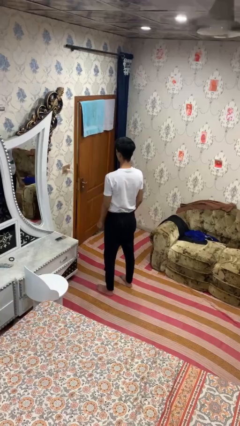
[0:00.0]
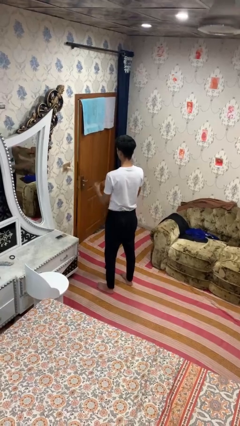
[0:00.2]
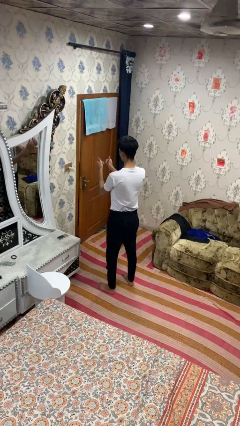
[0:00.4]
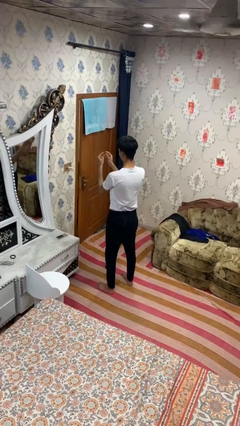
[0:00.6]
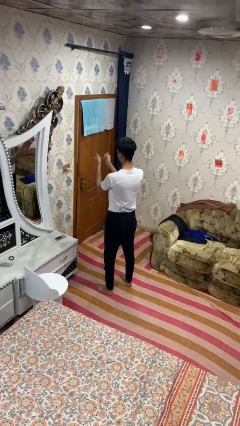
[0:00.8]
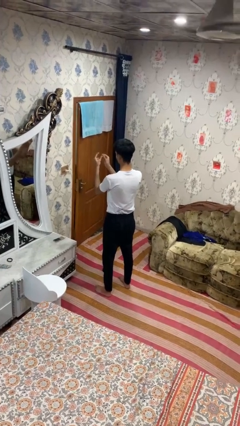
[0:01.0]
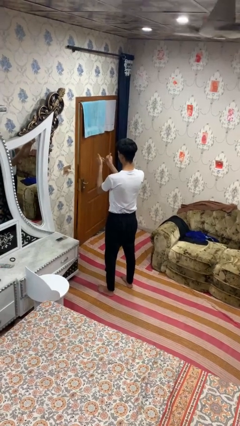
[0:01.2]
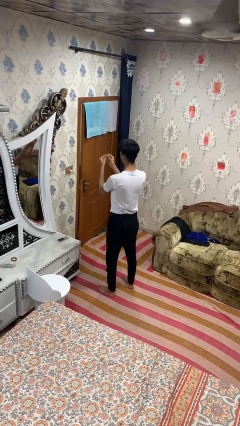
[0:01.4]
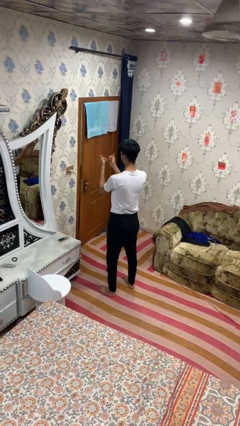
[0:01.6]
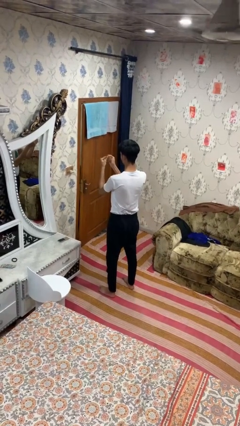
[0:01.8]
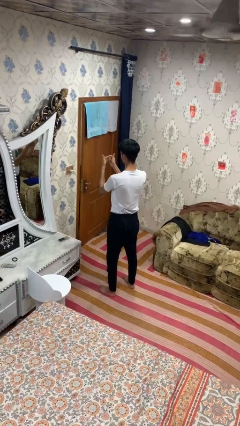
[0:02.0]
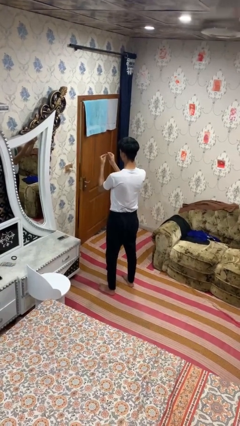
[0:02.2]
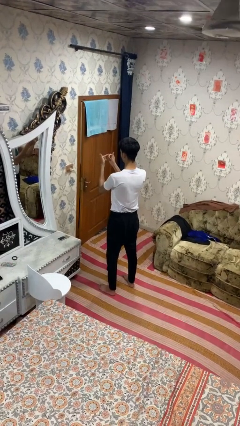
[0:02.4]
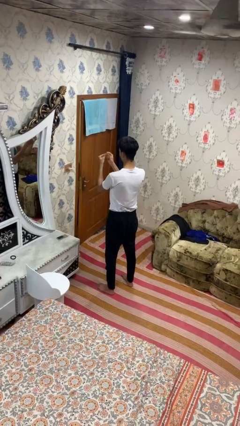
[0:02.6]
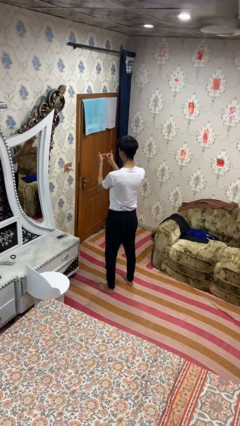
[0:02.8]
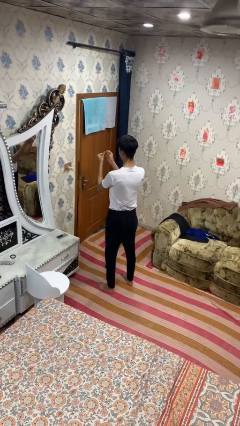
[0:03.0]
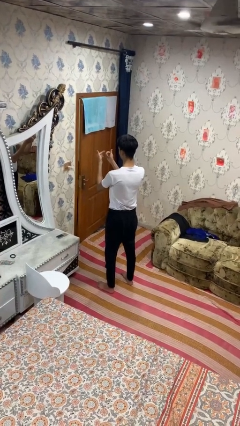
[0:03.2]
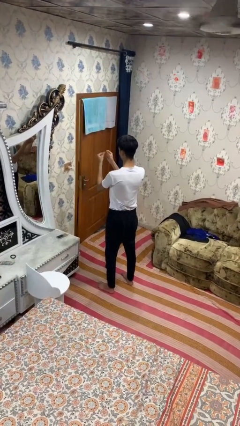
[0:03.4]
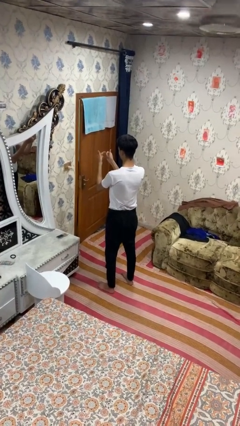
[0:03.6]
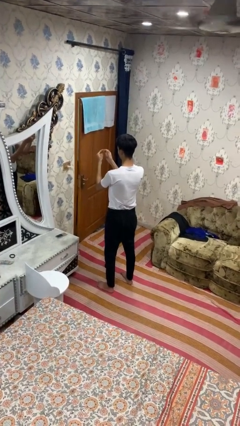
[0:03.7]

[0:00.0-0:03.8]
person snaps fingers

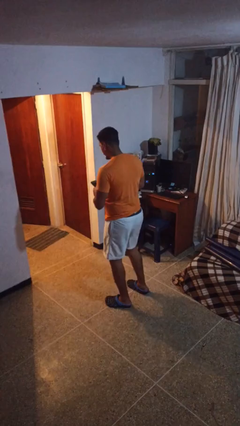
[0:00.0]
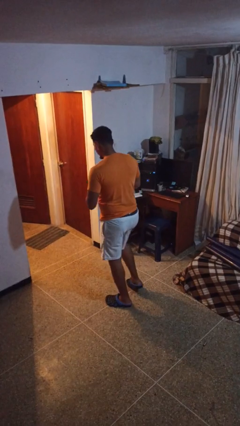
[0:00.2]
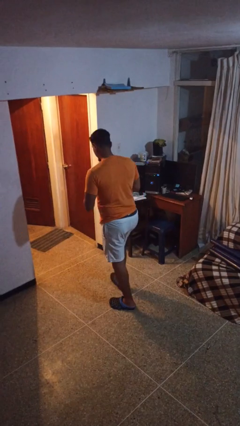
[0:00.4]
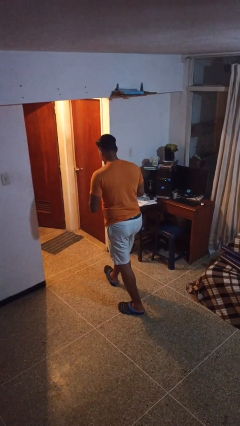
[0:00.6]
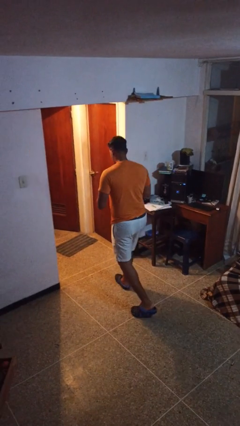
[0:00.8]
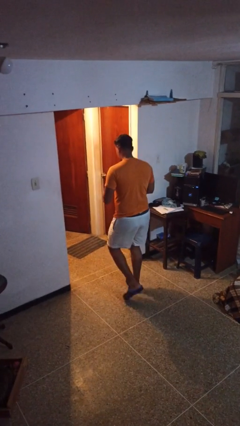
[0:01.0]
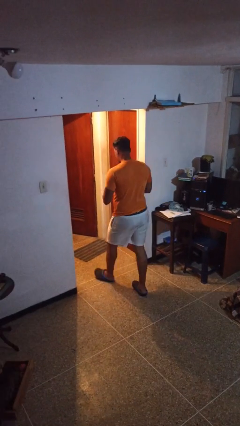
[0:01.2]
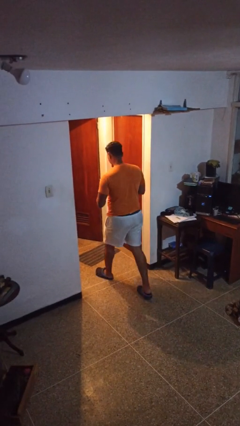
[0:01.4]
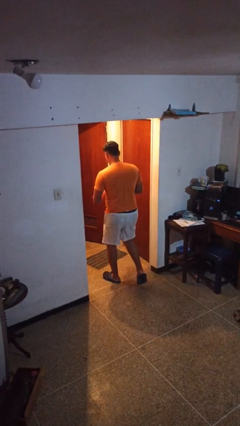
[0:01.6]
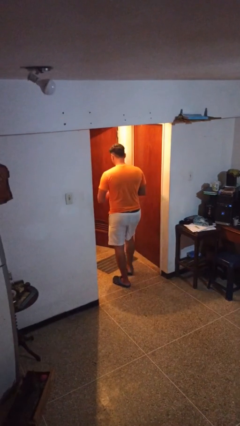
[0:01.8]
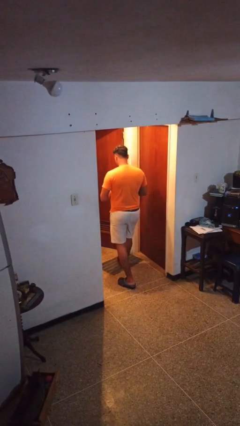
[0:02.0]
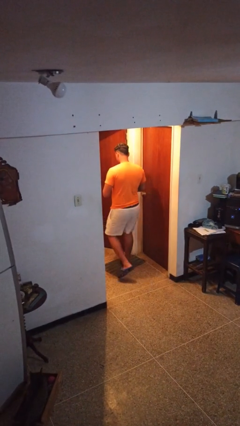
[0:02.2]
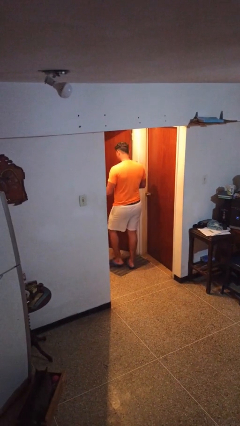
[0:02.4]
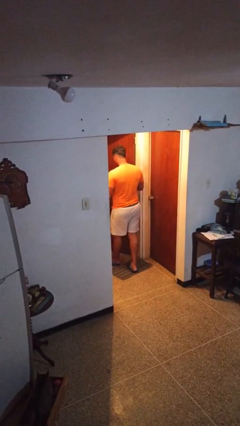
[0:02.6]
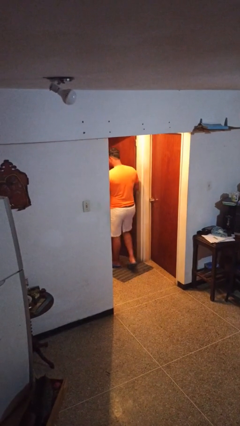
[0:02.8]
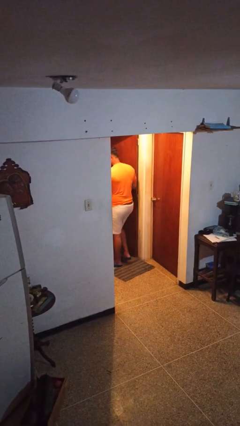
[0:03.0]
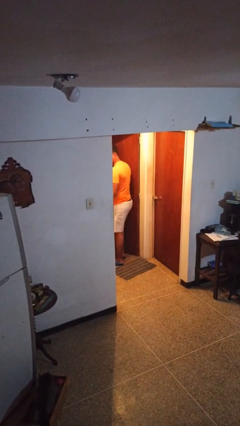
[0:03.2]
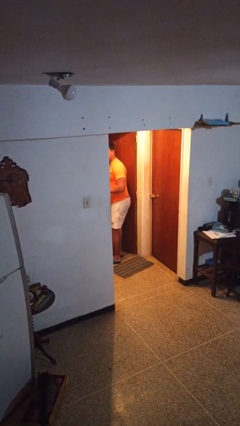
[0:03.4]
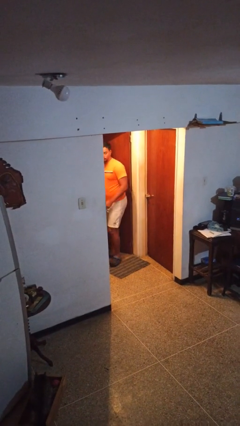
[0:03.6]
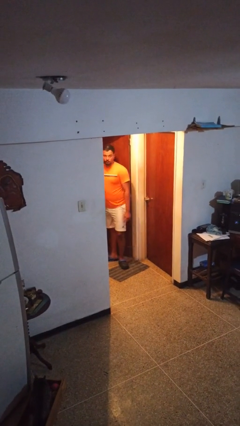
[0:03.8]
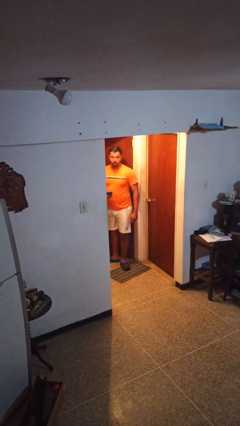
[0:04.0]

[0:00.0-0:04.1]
person exits scene through structure

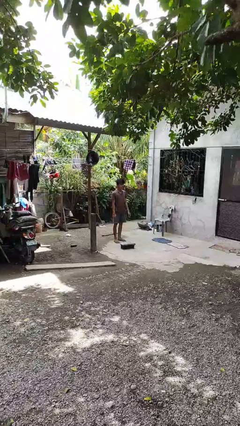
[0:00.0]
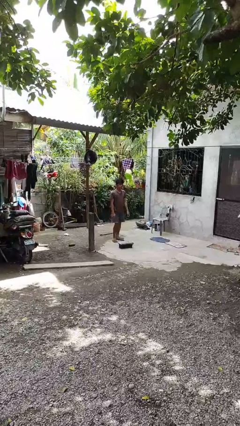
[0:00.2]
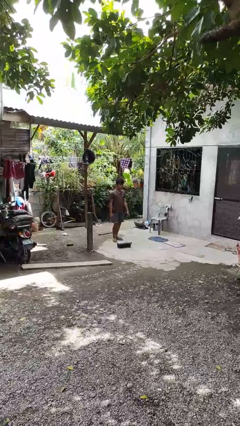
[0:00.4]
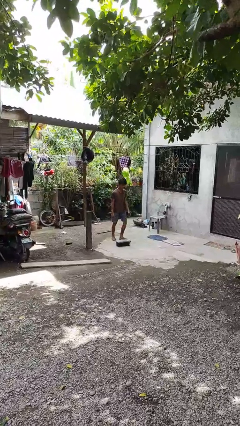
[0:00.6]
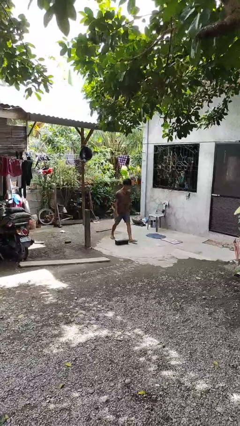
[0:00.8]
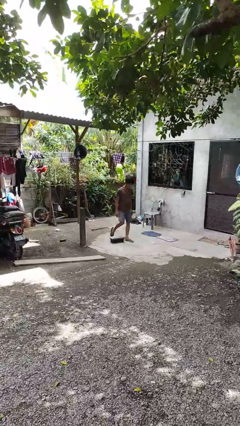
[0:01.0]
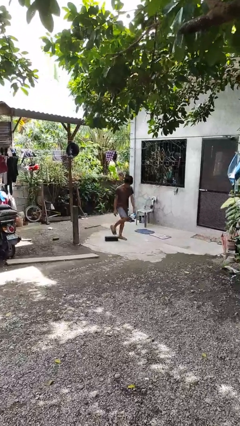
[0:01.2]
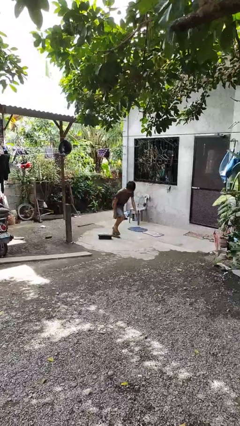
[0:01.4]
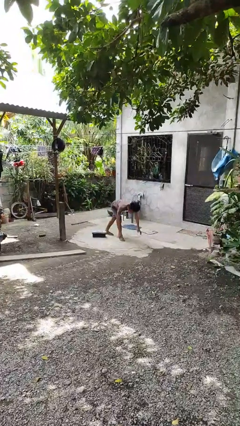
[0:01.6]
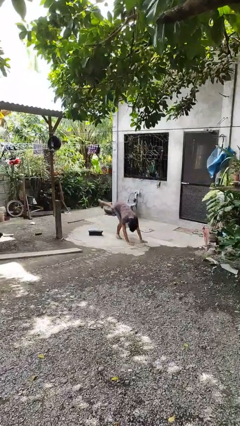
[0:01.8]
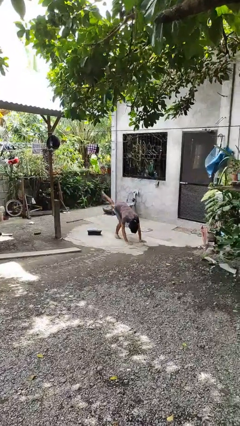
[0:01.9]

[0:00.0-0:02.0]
person trips on object on floor

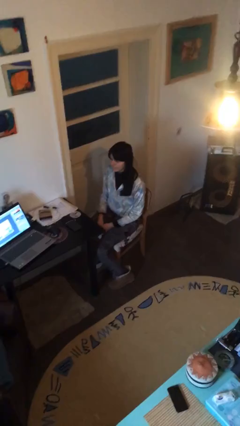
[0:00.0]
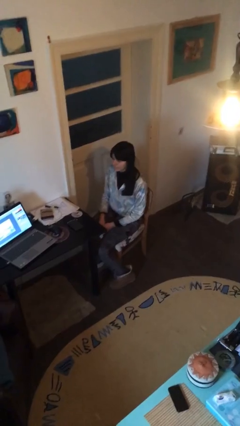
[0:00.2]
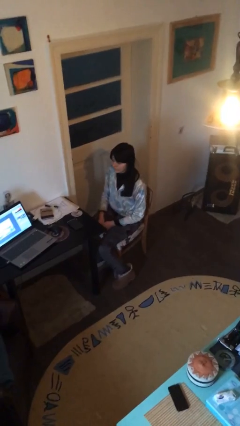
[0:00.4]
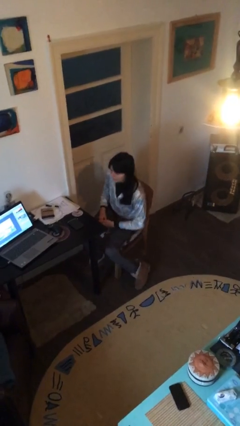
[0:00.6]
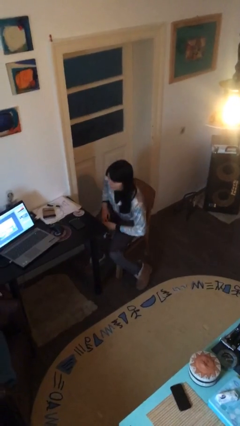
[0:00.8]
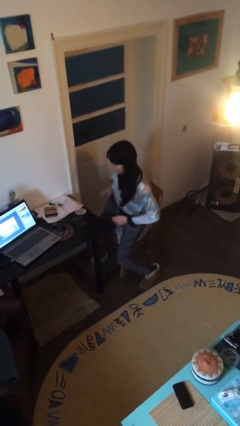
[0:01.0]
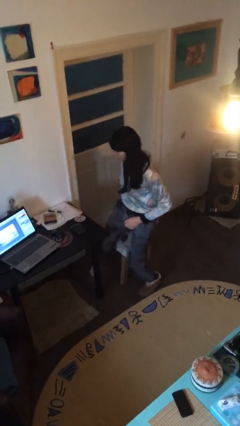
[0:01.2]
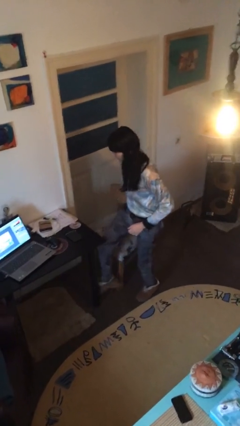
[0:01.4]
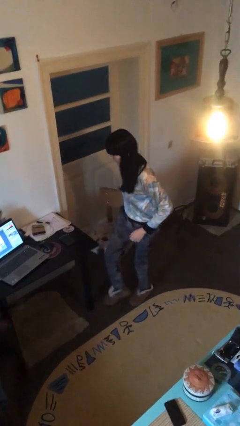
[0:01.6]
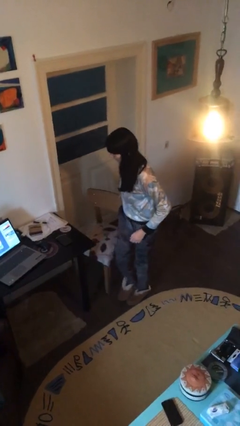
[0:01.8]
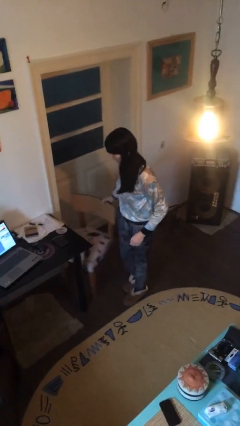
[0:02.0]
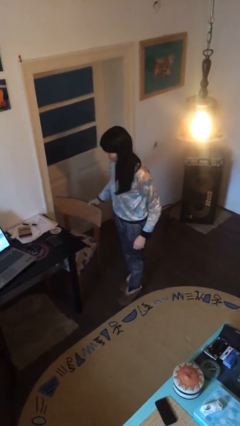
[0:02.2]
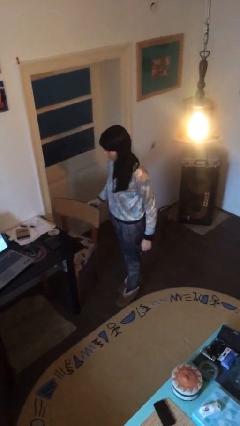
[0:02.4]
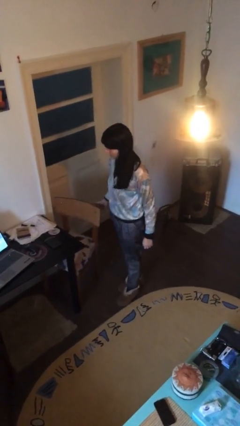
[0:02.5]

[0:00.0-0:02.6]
person stands up

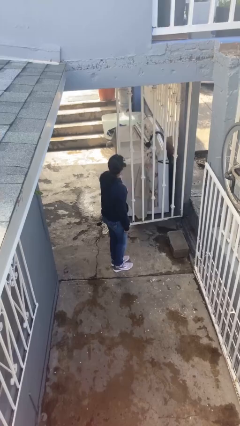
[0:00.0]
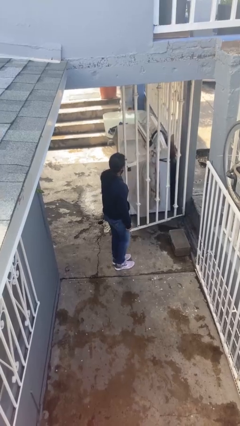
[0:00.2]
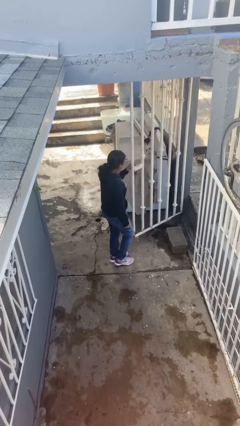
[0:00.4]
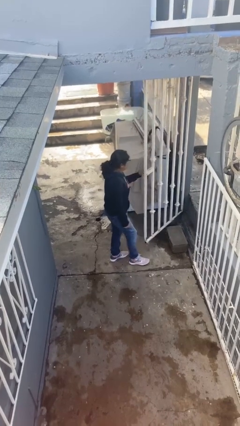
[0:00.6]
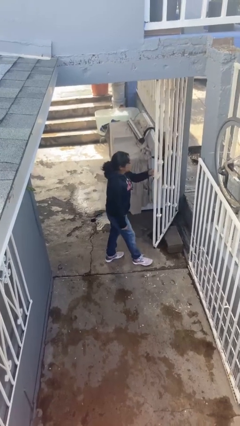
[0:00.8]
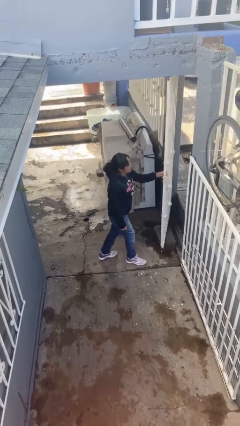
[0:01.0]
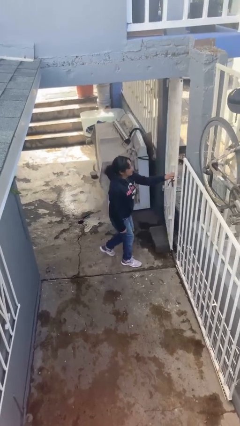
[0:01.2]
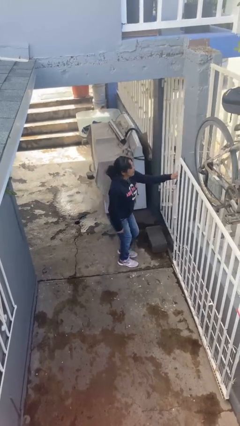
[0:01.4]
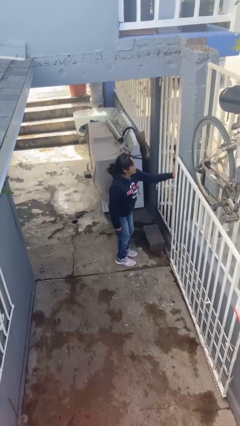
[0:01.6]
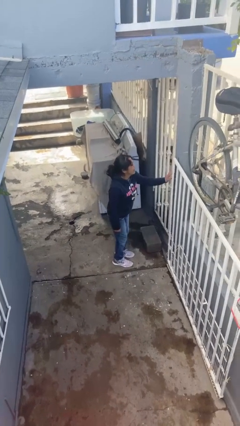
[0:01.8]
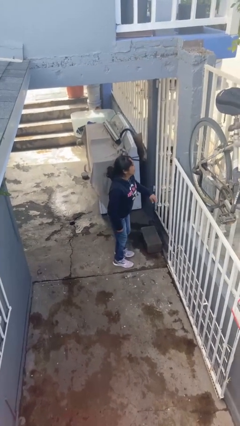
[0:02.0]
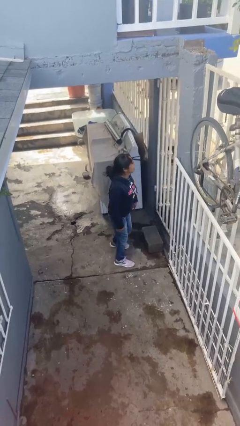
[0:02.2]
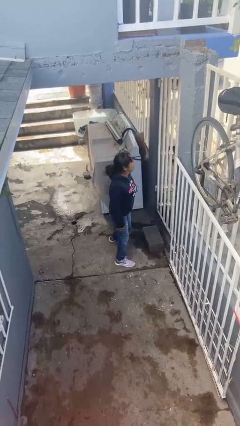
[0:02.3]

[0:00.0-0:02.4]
person closes facility door

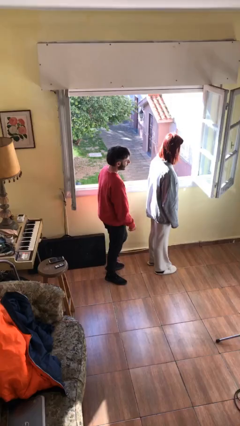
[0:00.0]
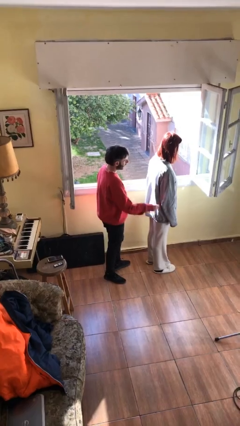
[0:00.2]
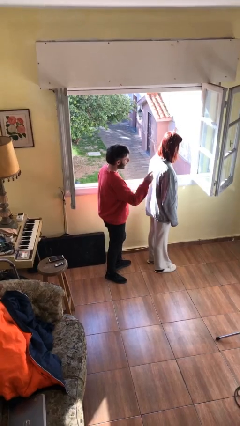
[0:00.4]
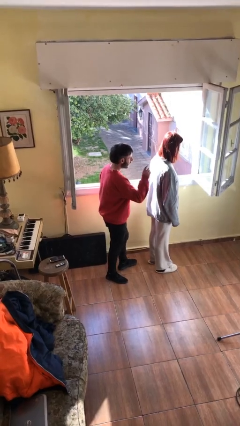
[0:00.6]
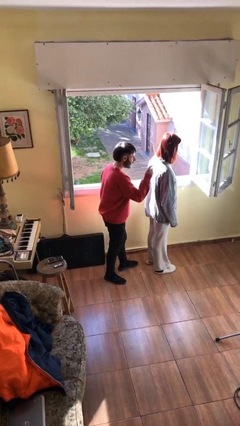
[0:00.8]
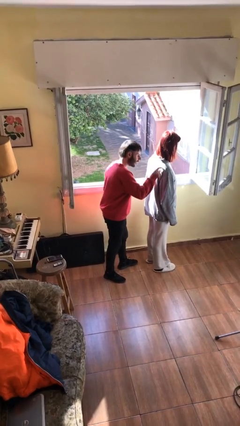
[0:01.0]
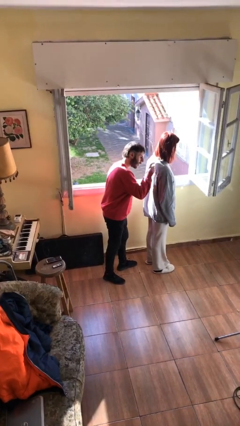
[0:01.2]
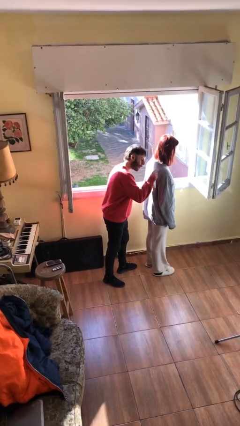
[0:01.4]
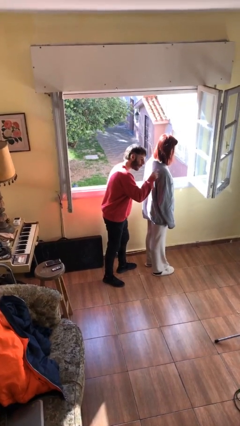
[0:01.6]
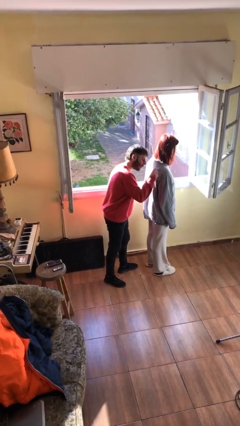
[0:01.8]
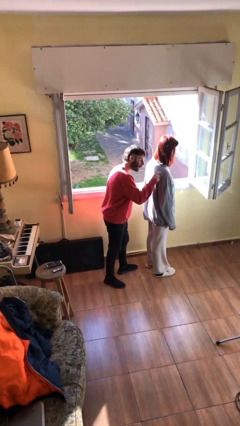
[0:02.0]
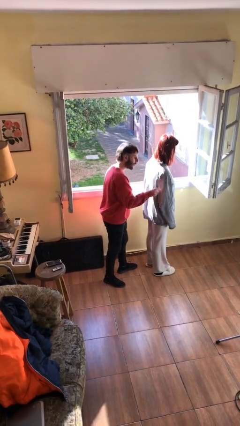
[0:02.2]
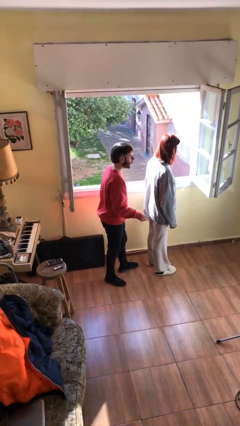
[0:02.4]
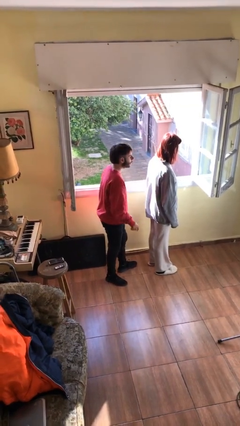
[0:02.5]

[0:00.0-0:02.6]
person touches back of person
